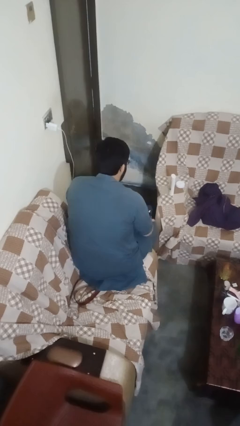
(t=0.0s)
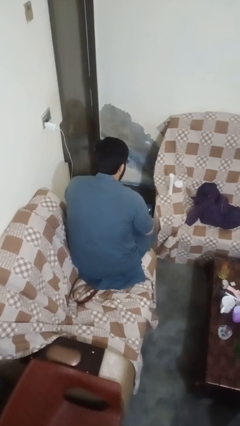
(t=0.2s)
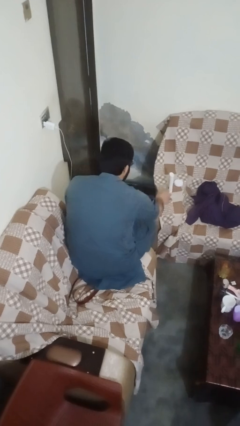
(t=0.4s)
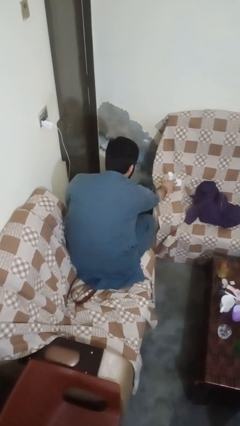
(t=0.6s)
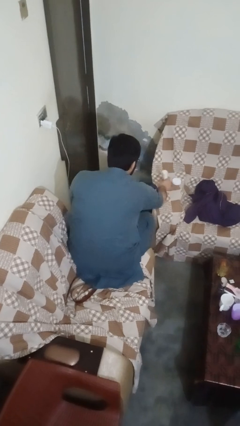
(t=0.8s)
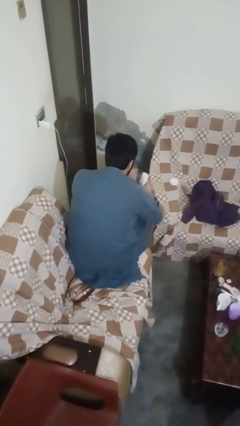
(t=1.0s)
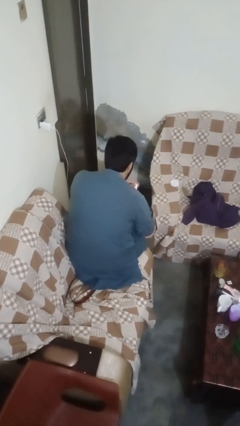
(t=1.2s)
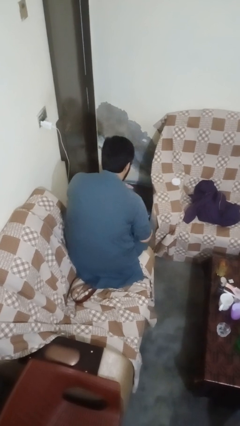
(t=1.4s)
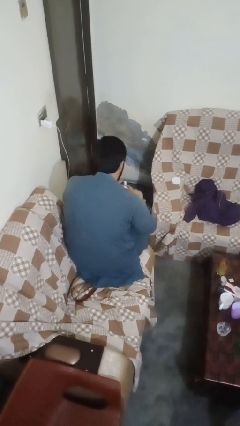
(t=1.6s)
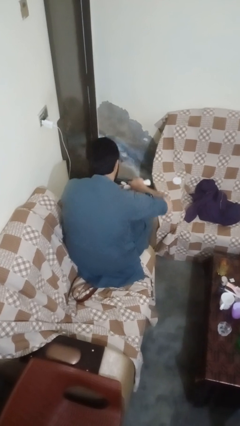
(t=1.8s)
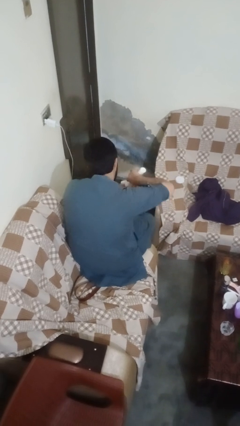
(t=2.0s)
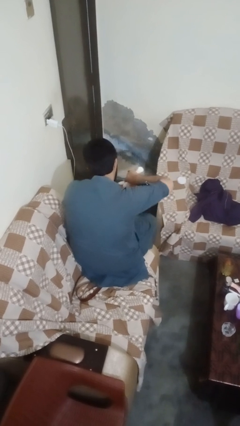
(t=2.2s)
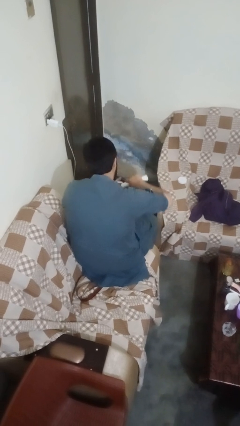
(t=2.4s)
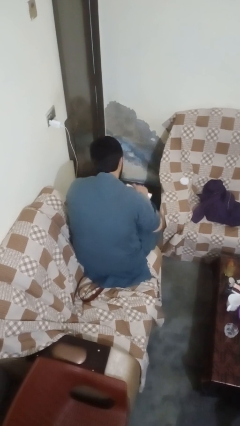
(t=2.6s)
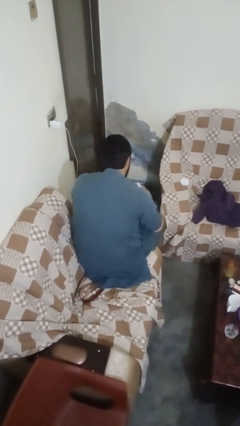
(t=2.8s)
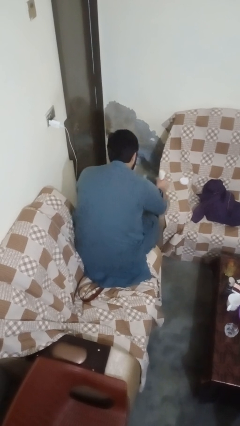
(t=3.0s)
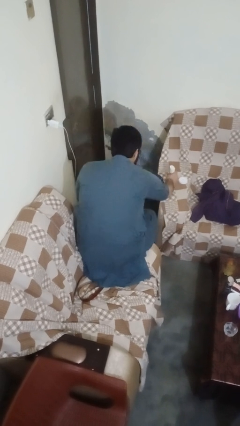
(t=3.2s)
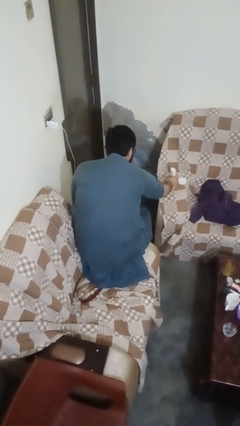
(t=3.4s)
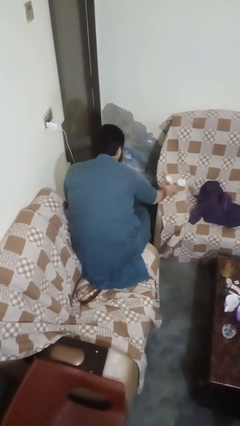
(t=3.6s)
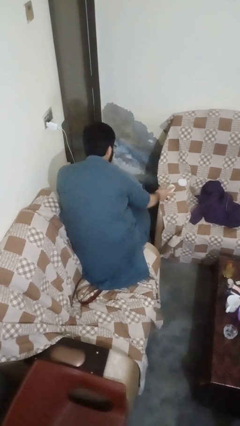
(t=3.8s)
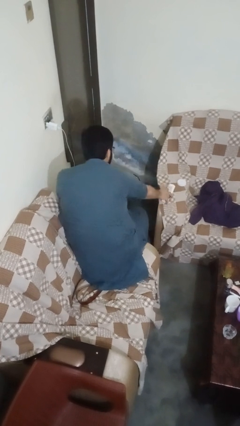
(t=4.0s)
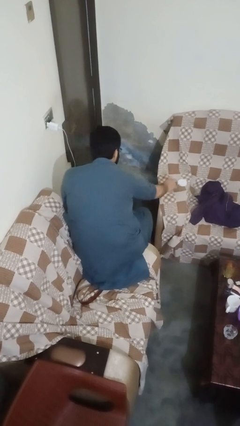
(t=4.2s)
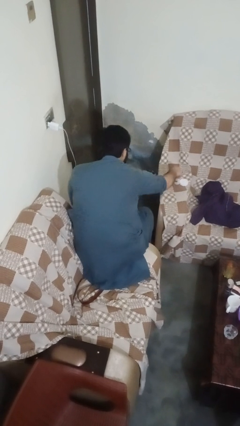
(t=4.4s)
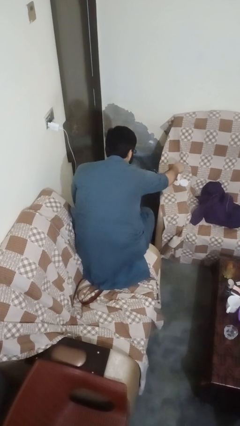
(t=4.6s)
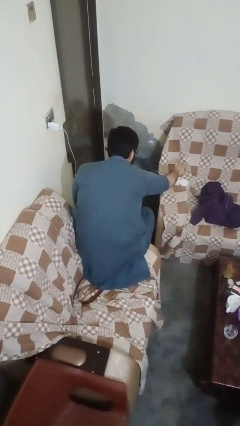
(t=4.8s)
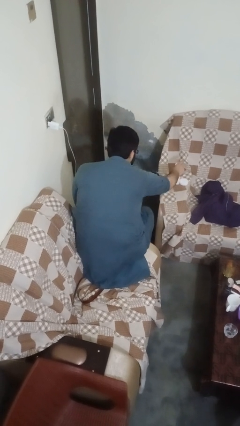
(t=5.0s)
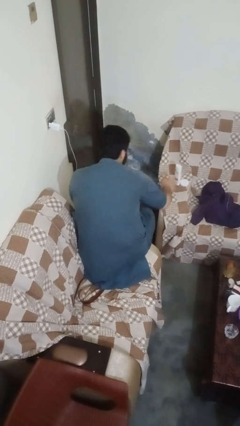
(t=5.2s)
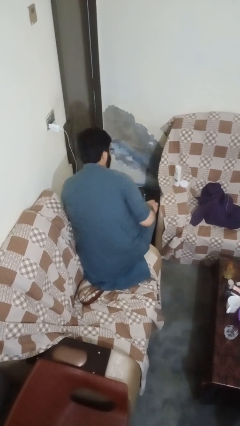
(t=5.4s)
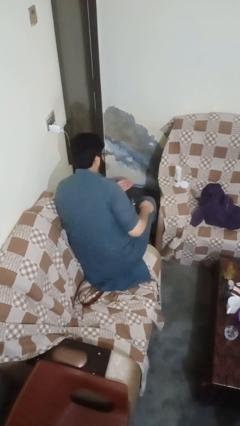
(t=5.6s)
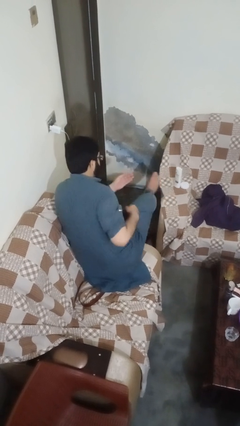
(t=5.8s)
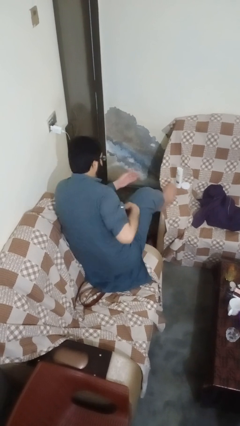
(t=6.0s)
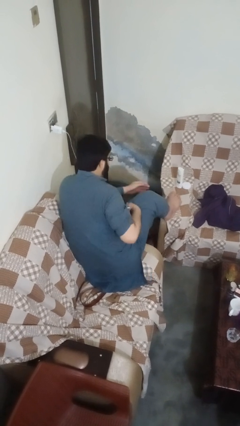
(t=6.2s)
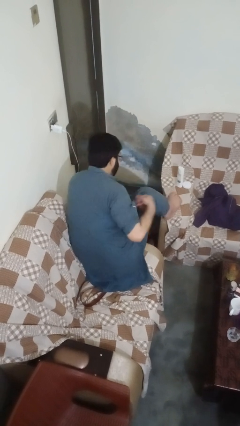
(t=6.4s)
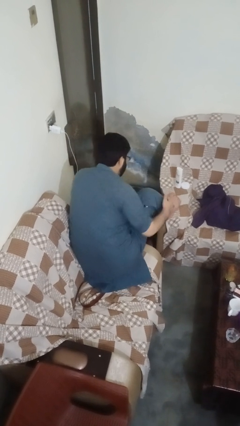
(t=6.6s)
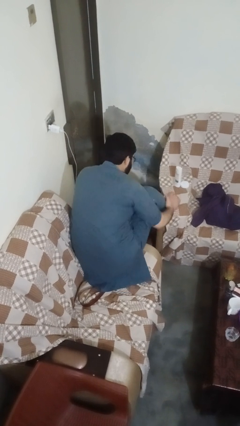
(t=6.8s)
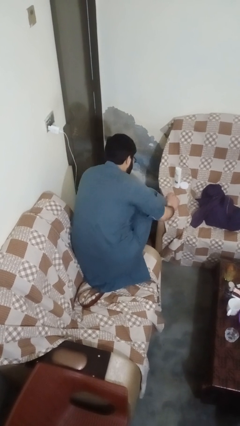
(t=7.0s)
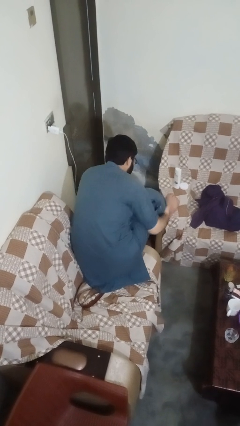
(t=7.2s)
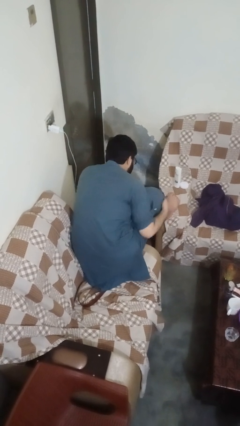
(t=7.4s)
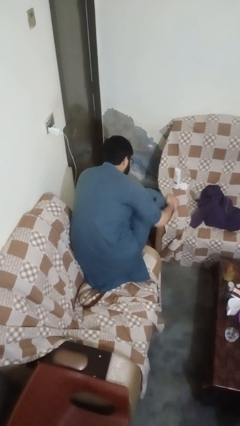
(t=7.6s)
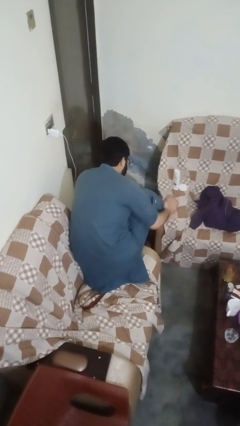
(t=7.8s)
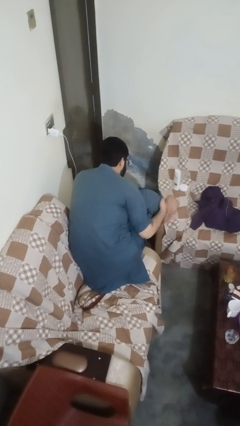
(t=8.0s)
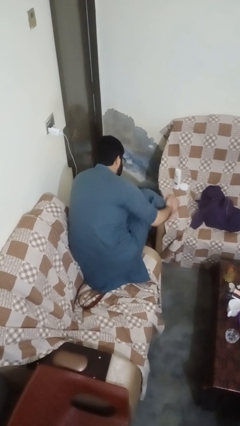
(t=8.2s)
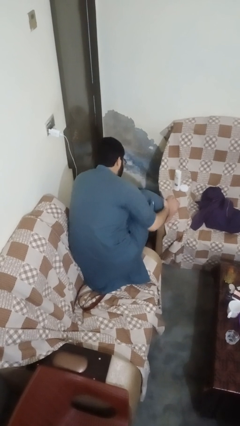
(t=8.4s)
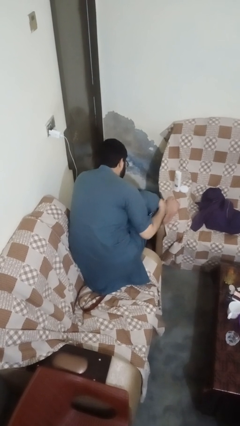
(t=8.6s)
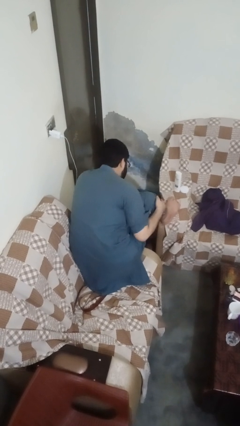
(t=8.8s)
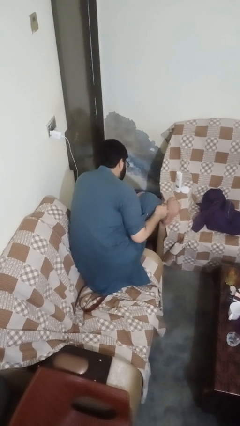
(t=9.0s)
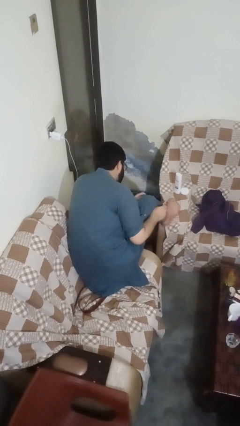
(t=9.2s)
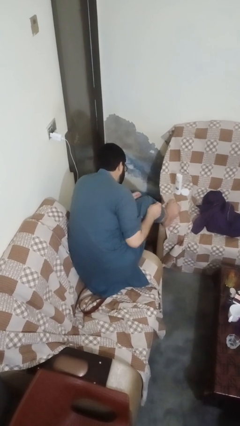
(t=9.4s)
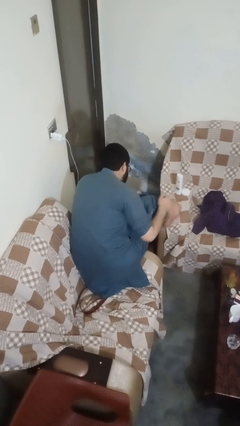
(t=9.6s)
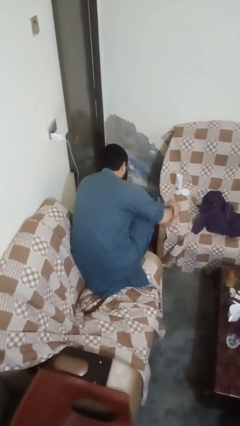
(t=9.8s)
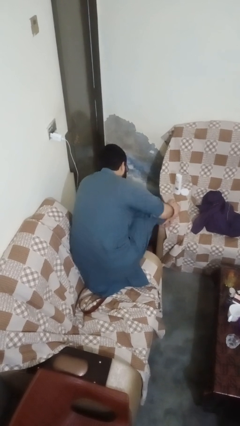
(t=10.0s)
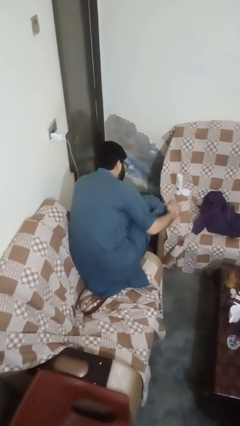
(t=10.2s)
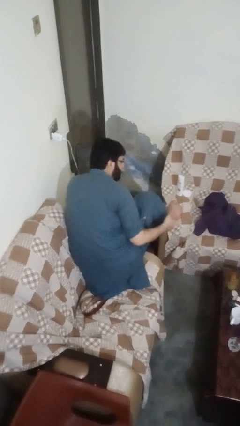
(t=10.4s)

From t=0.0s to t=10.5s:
person applies sunscreen

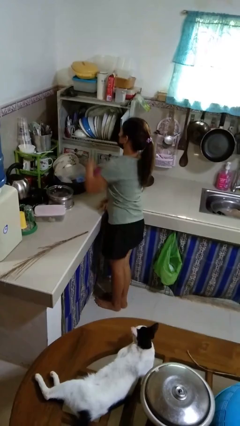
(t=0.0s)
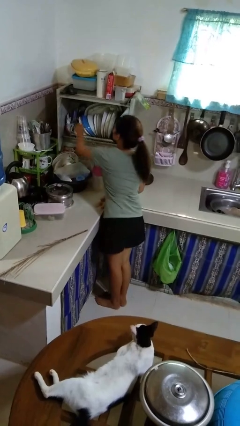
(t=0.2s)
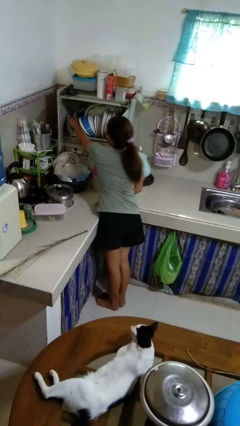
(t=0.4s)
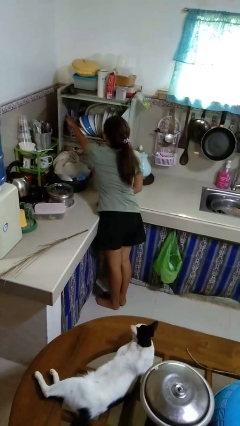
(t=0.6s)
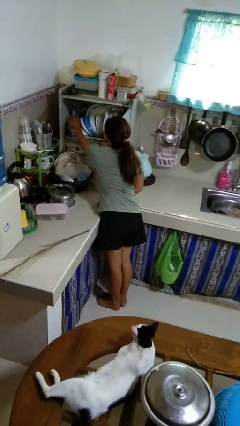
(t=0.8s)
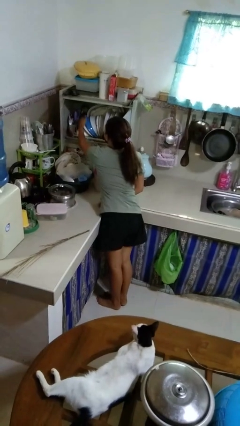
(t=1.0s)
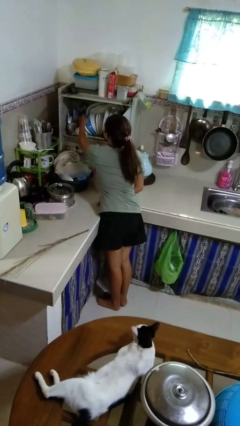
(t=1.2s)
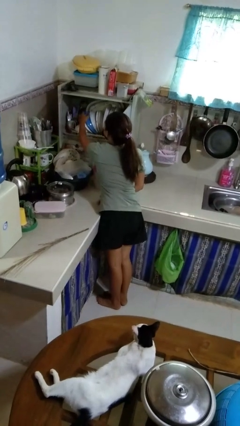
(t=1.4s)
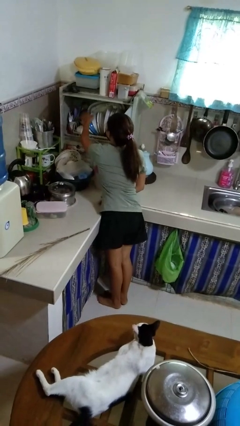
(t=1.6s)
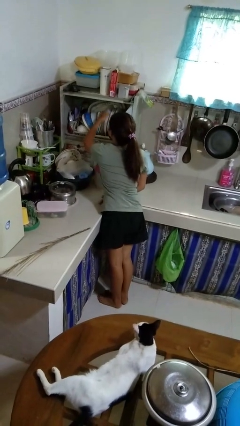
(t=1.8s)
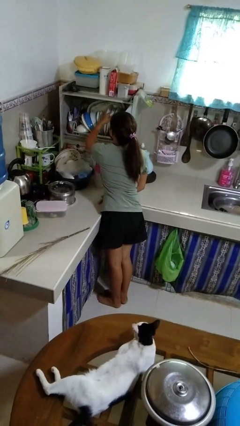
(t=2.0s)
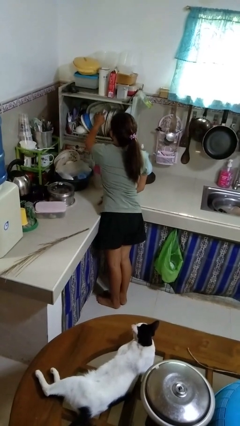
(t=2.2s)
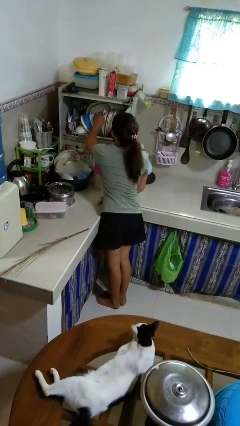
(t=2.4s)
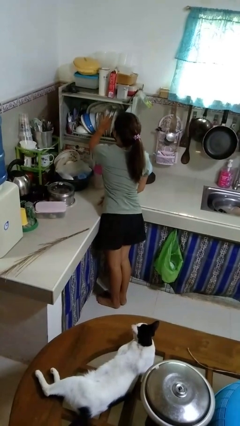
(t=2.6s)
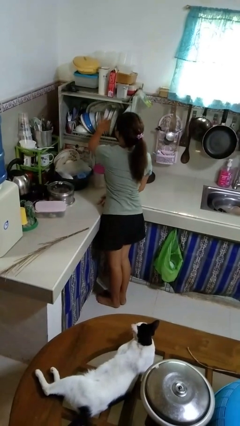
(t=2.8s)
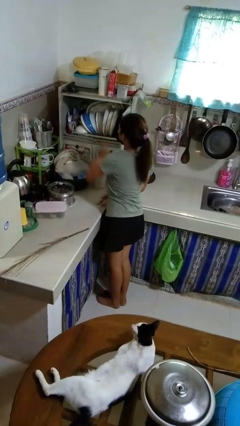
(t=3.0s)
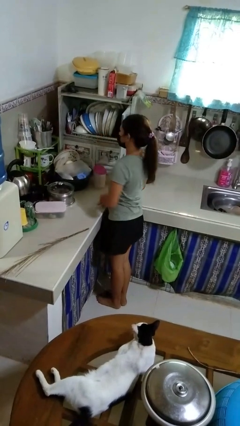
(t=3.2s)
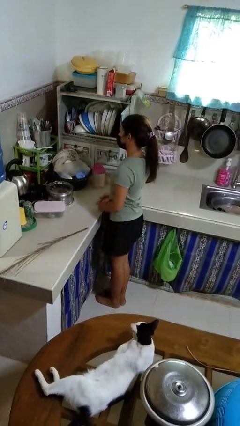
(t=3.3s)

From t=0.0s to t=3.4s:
person searches in kitchen drawer

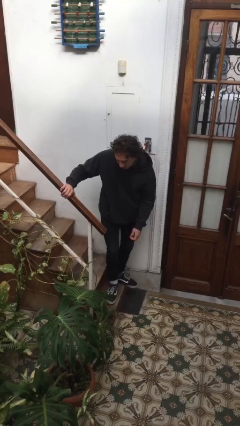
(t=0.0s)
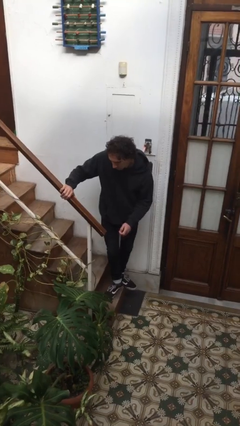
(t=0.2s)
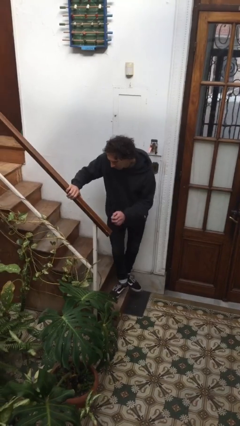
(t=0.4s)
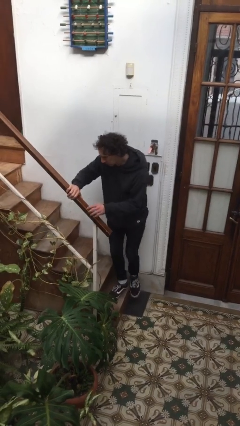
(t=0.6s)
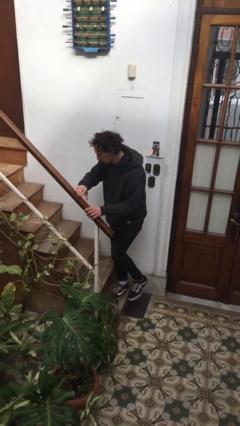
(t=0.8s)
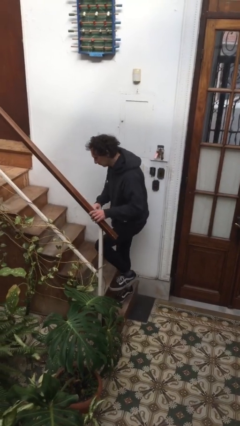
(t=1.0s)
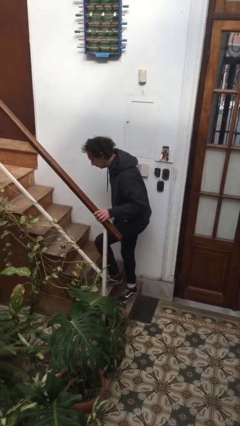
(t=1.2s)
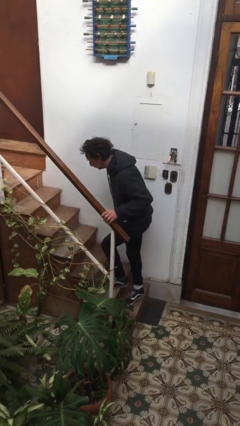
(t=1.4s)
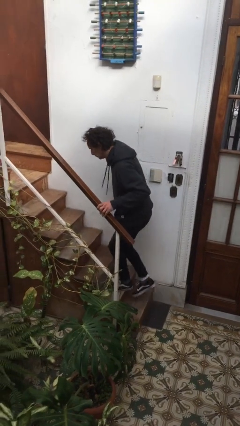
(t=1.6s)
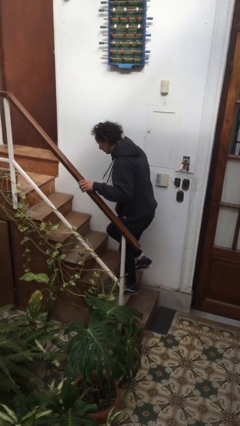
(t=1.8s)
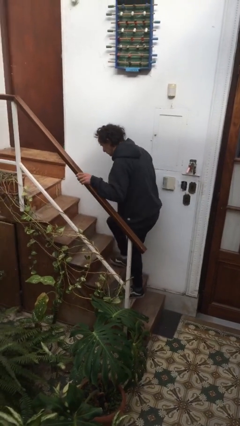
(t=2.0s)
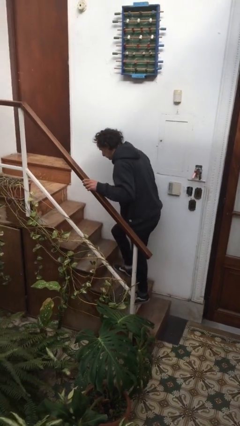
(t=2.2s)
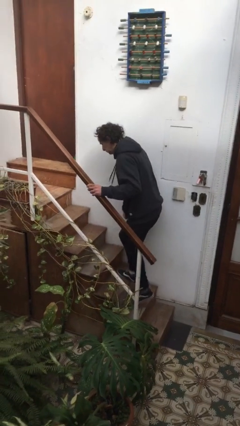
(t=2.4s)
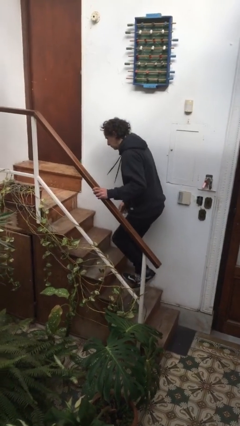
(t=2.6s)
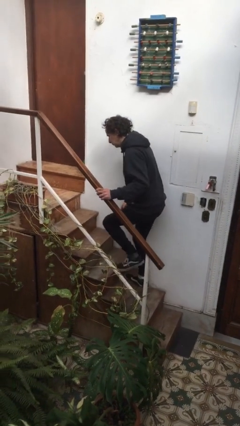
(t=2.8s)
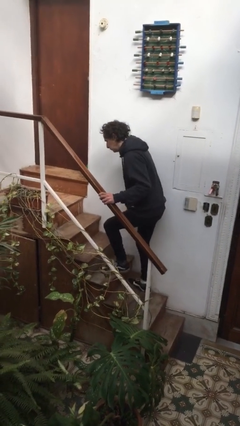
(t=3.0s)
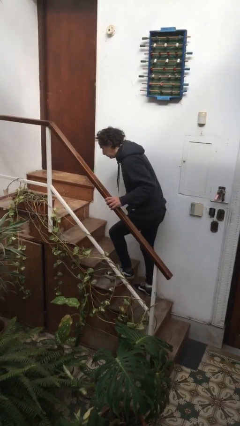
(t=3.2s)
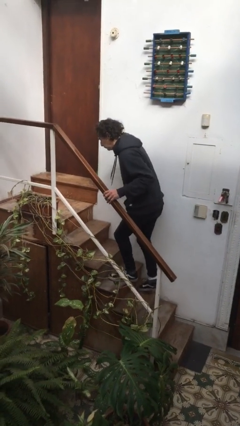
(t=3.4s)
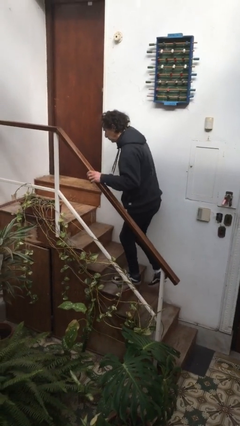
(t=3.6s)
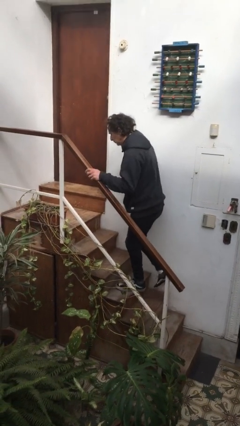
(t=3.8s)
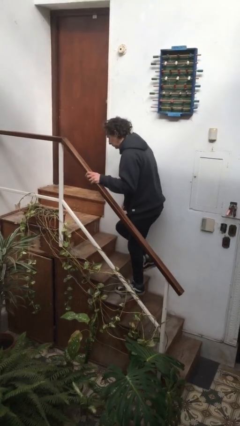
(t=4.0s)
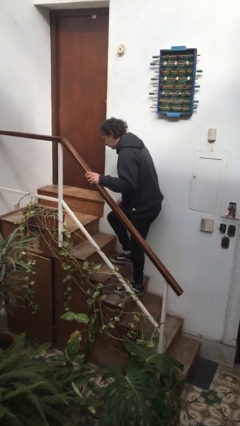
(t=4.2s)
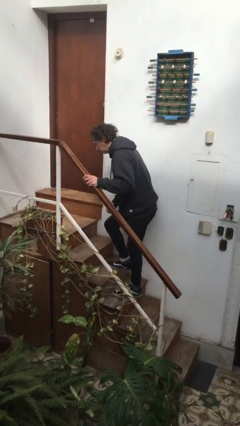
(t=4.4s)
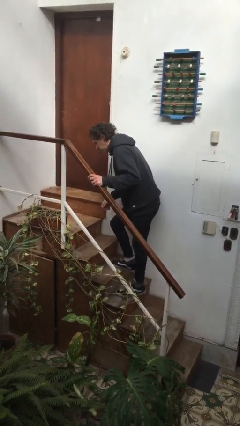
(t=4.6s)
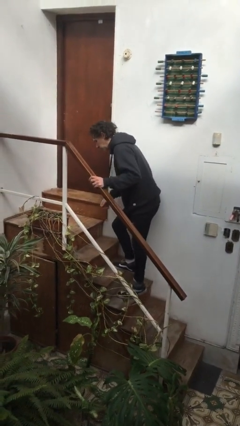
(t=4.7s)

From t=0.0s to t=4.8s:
person climbs up stairs
